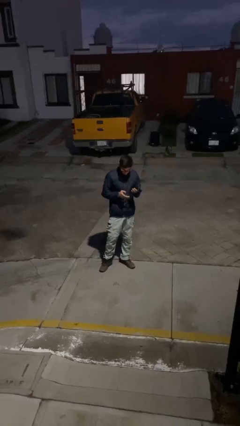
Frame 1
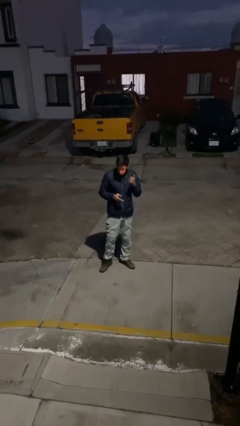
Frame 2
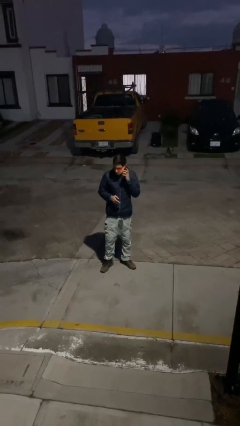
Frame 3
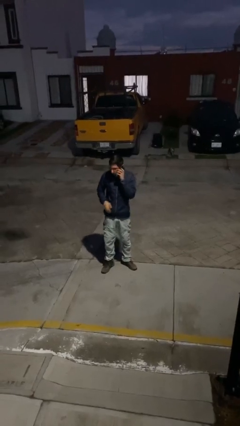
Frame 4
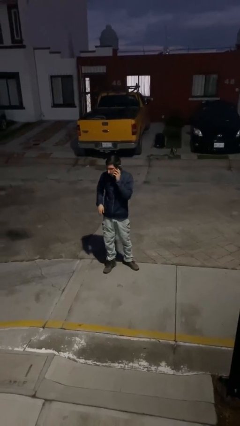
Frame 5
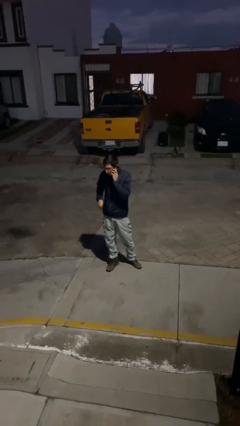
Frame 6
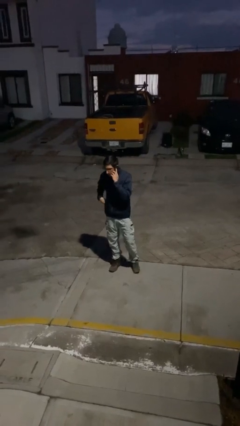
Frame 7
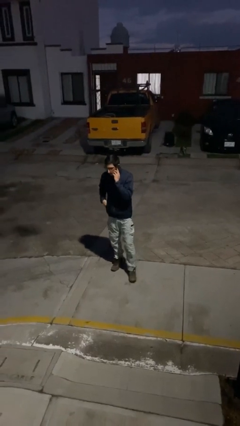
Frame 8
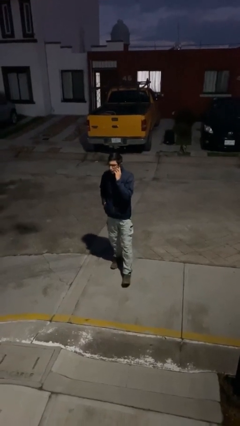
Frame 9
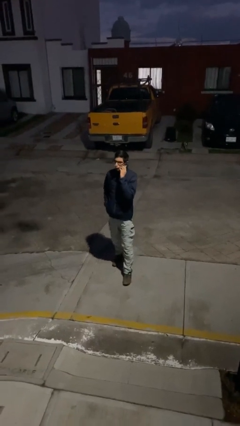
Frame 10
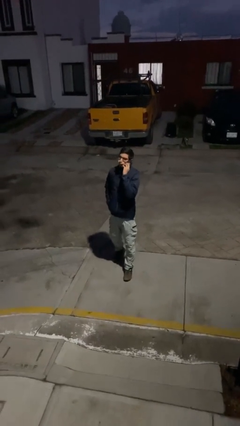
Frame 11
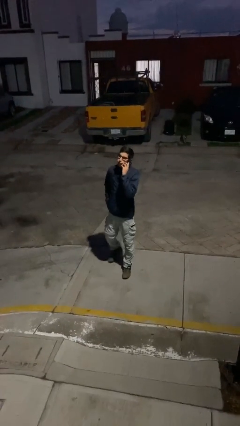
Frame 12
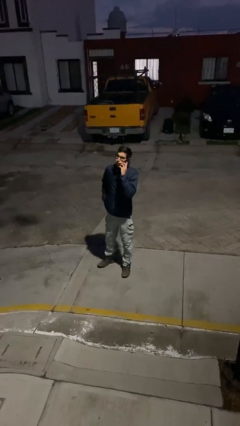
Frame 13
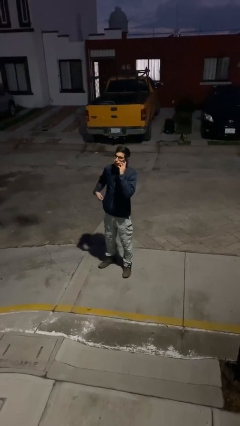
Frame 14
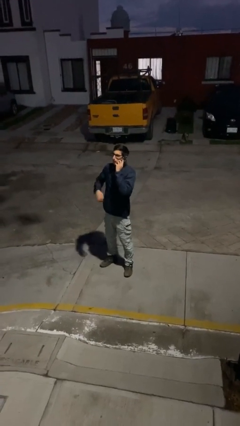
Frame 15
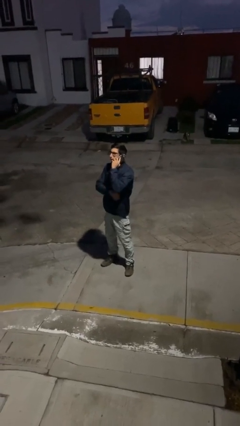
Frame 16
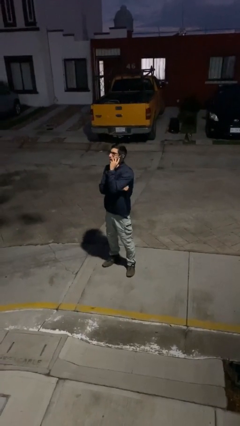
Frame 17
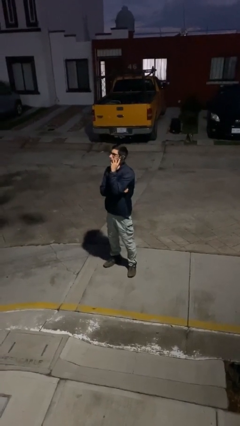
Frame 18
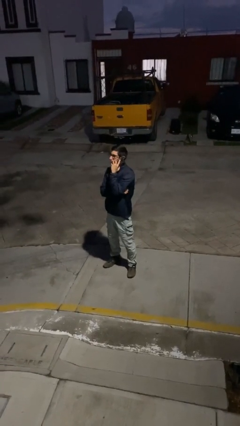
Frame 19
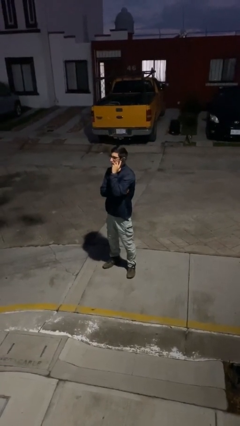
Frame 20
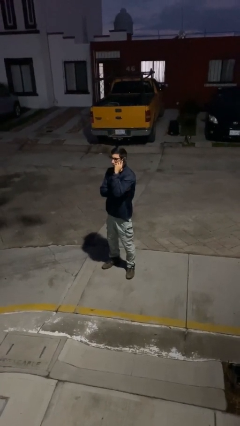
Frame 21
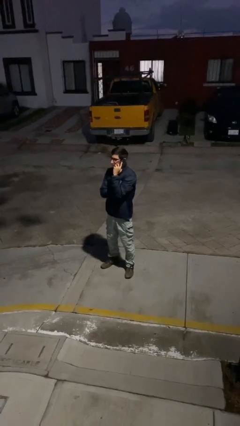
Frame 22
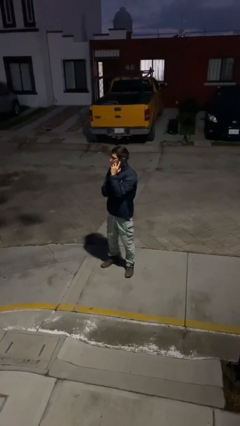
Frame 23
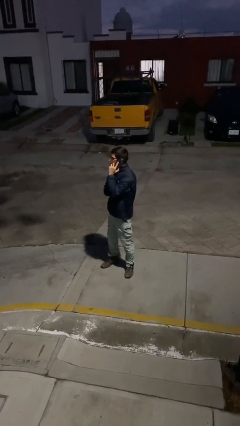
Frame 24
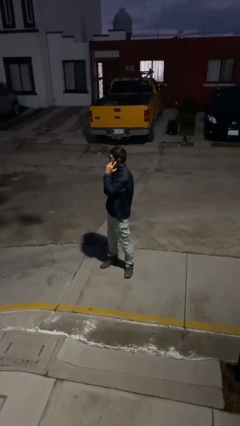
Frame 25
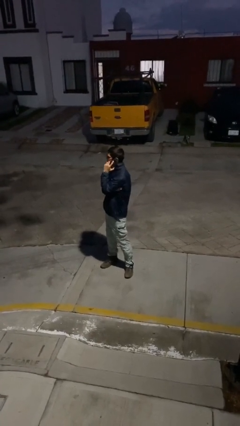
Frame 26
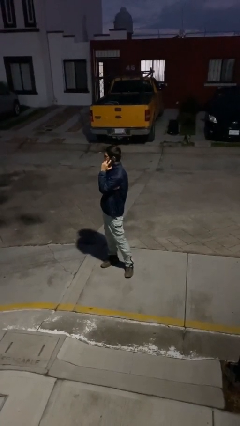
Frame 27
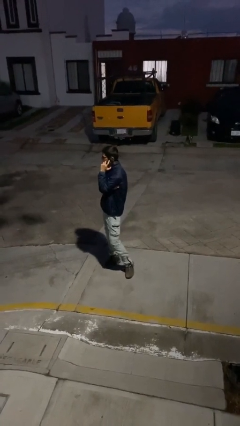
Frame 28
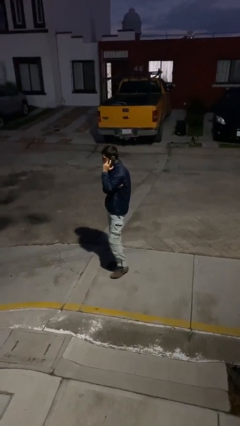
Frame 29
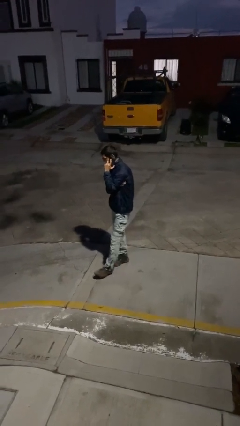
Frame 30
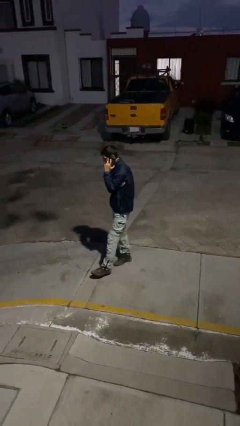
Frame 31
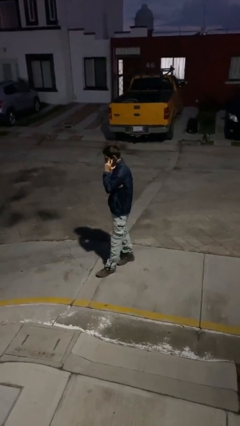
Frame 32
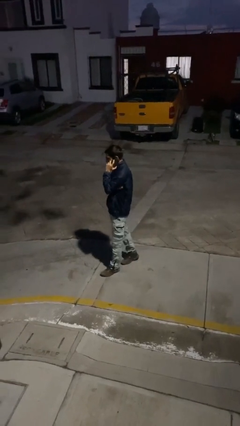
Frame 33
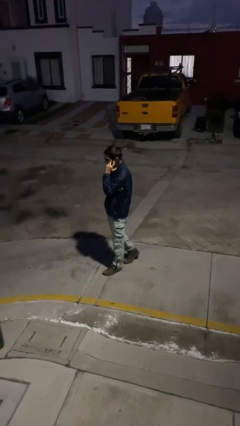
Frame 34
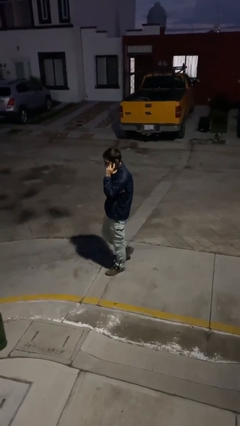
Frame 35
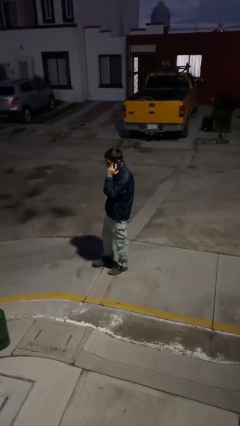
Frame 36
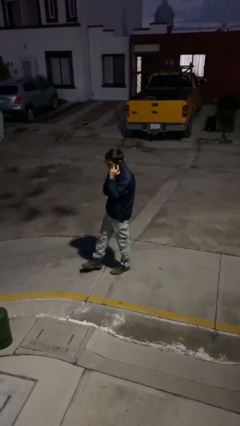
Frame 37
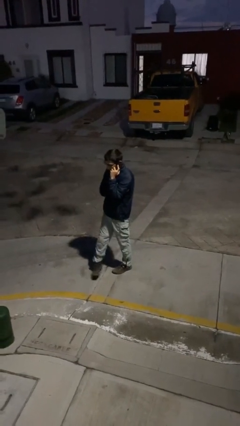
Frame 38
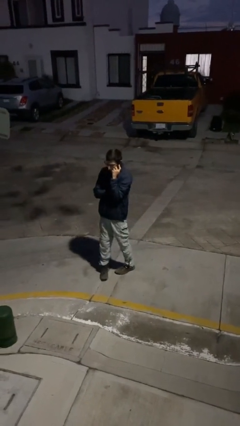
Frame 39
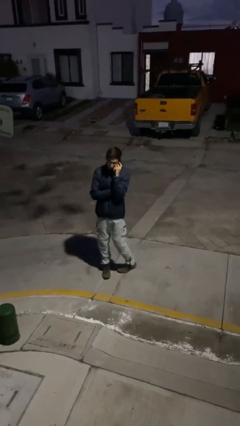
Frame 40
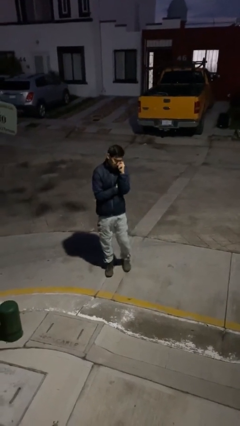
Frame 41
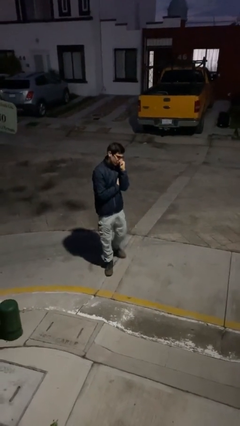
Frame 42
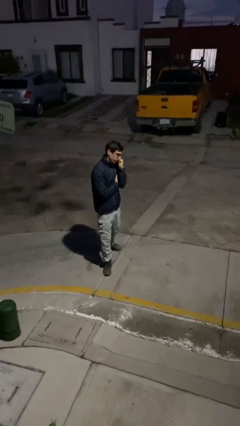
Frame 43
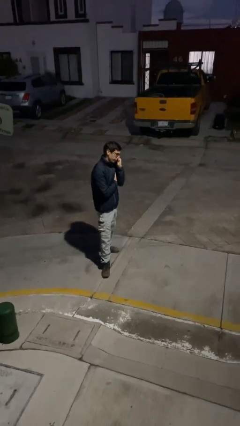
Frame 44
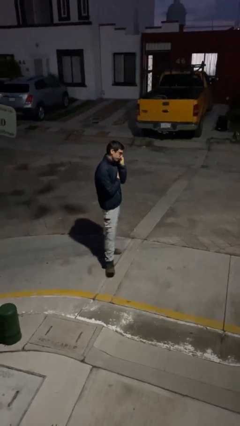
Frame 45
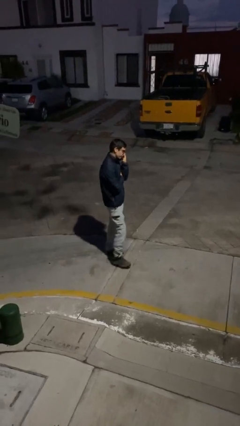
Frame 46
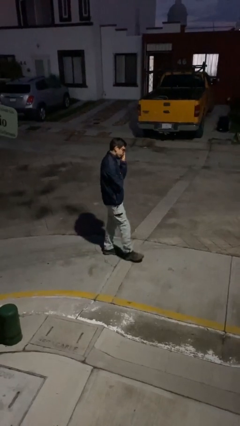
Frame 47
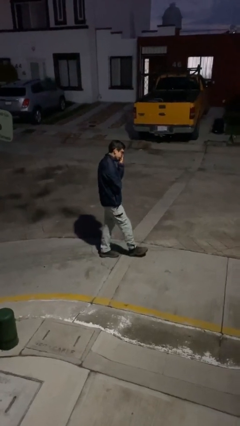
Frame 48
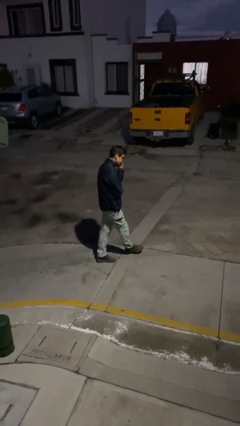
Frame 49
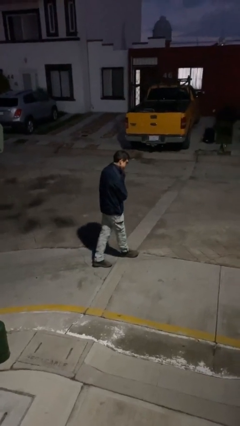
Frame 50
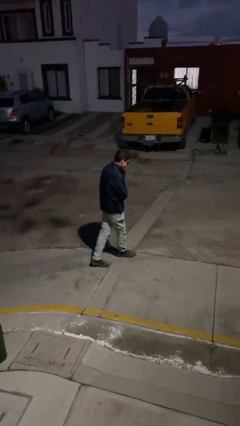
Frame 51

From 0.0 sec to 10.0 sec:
person talks on phone

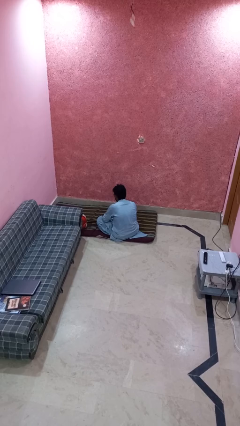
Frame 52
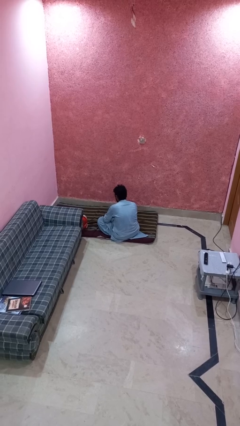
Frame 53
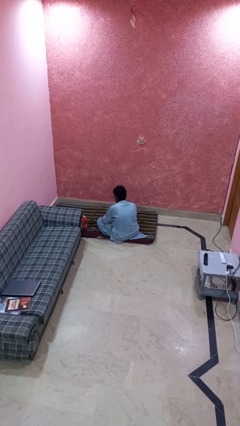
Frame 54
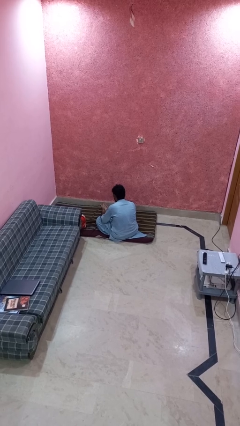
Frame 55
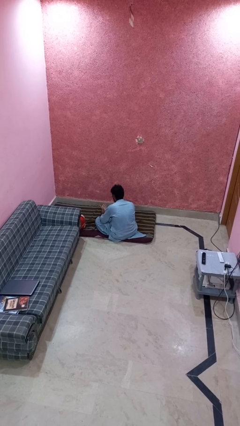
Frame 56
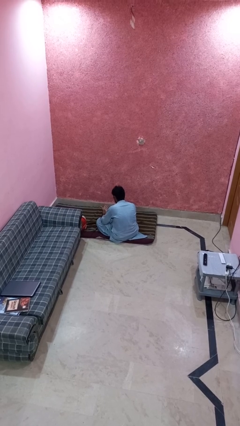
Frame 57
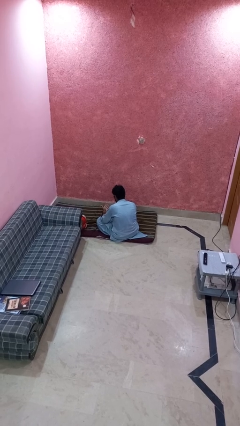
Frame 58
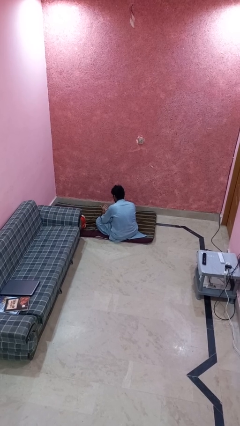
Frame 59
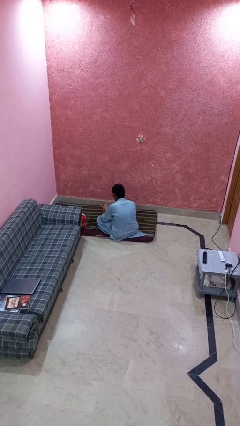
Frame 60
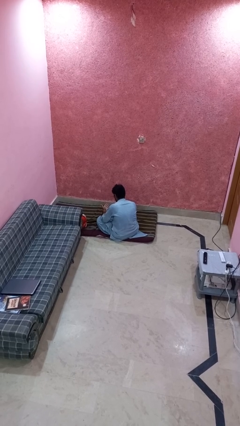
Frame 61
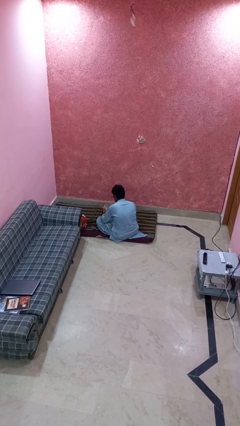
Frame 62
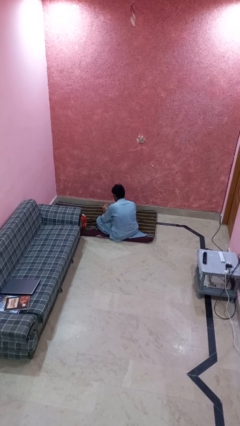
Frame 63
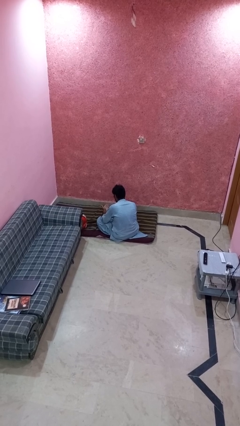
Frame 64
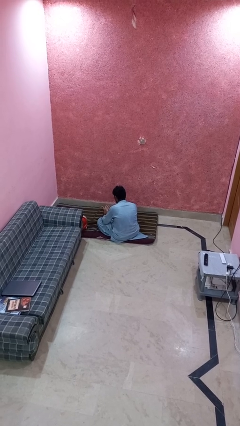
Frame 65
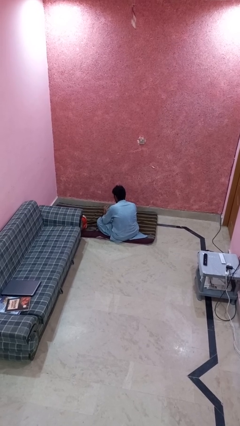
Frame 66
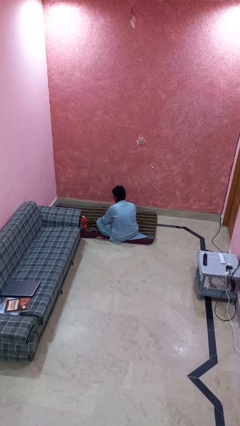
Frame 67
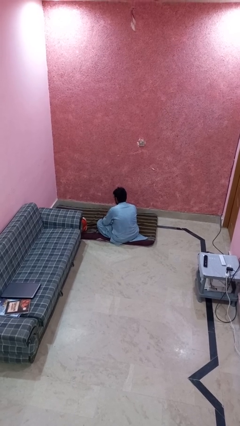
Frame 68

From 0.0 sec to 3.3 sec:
person looks at hands in lap

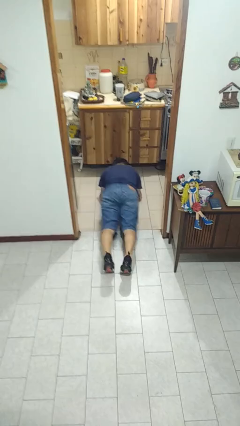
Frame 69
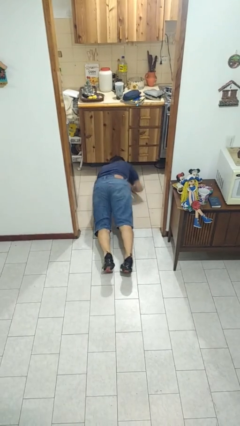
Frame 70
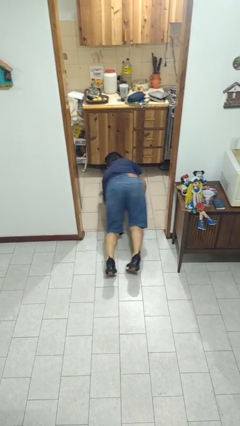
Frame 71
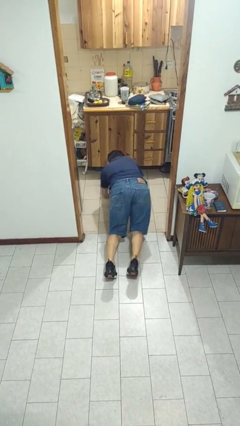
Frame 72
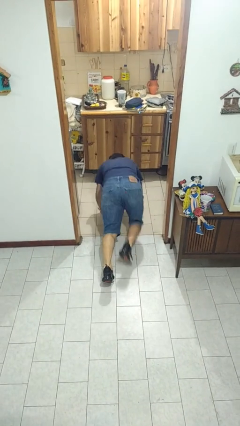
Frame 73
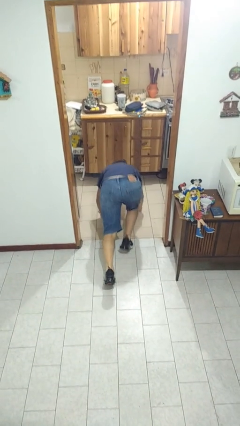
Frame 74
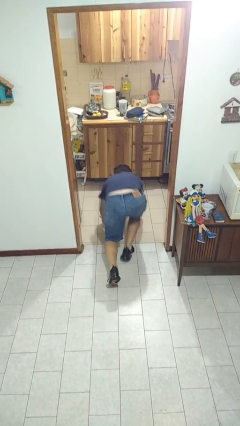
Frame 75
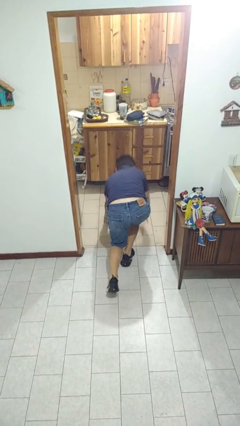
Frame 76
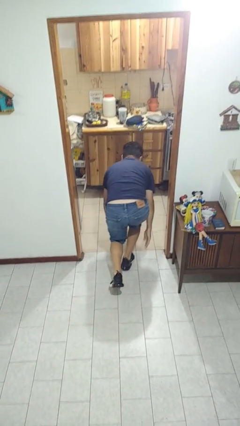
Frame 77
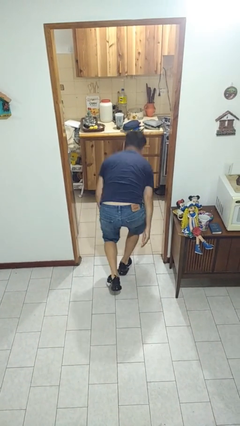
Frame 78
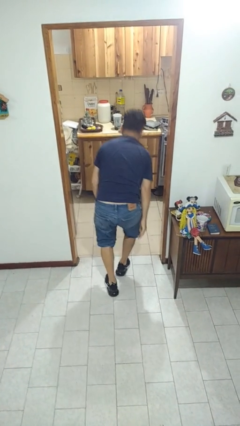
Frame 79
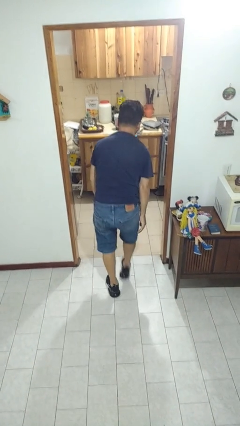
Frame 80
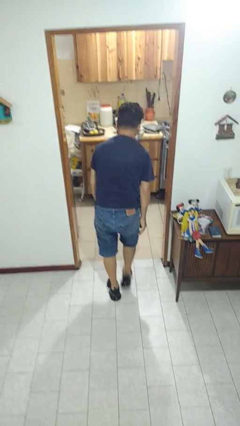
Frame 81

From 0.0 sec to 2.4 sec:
person stands up from floor

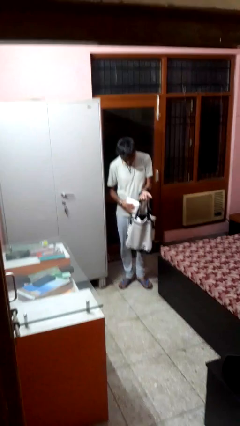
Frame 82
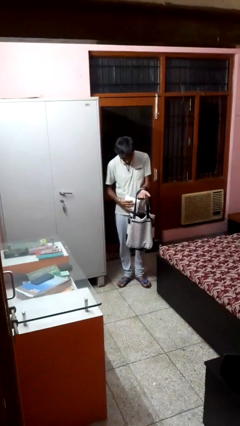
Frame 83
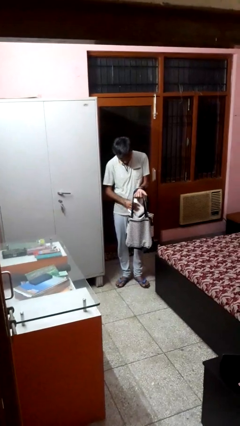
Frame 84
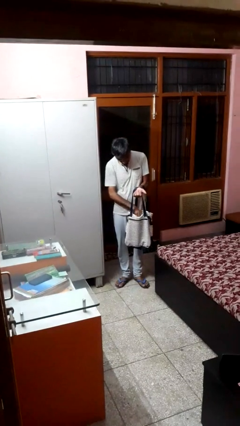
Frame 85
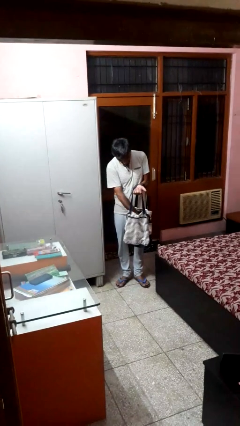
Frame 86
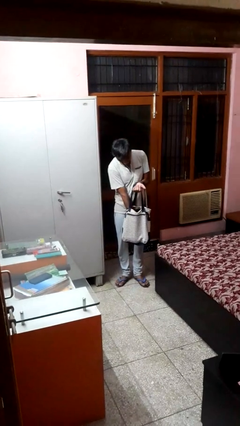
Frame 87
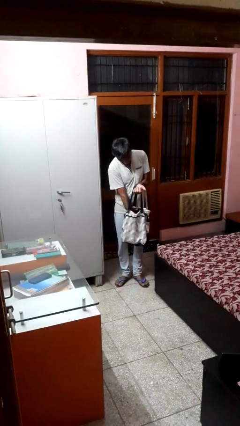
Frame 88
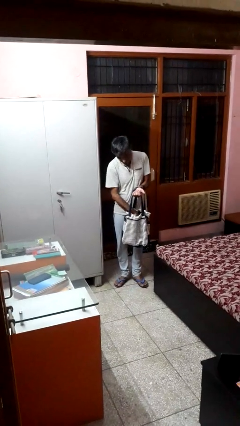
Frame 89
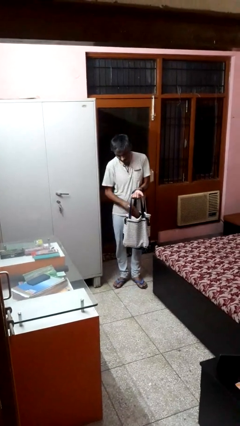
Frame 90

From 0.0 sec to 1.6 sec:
person puts object into bag

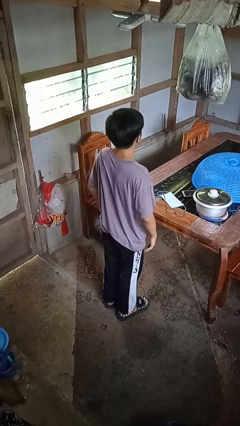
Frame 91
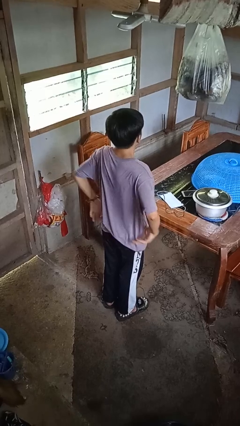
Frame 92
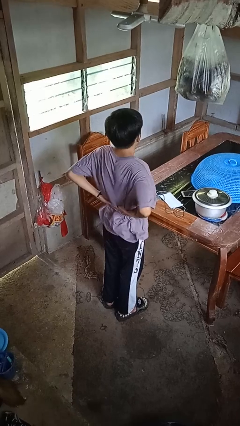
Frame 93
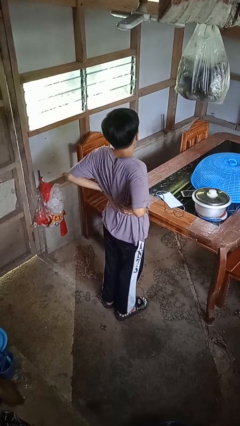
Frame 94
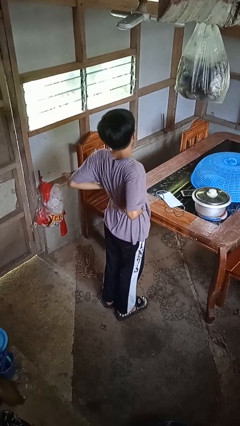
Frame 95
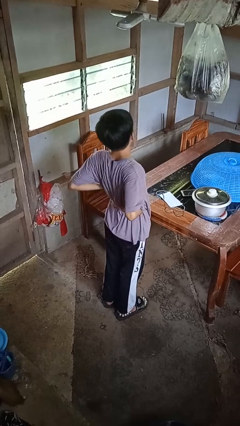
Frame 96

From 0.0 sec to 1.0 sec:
person stretches back
